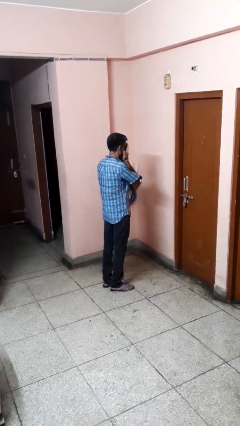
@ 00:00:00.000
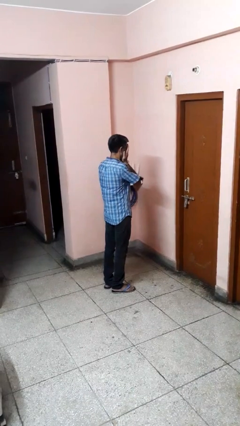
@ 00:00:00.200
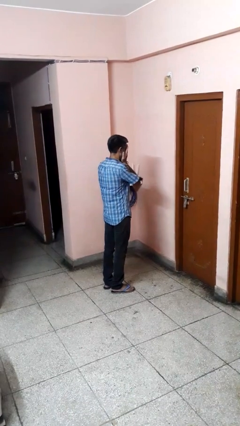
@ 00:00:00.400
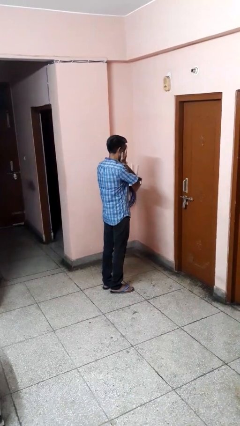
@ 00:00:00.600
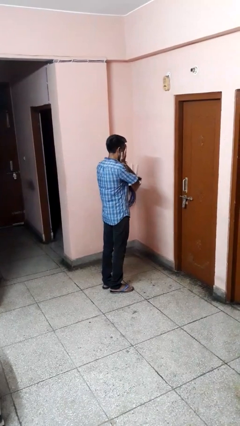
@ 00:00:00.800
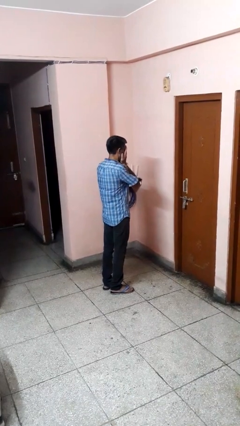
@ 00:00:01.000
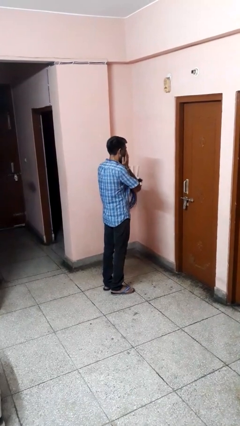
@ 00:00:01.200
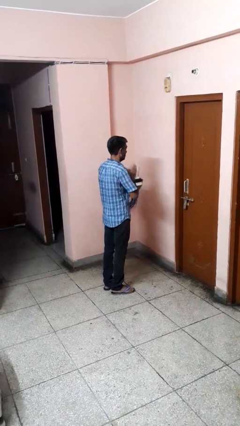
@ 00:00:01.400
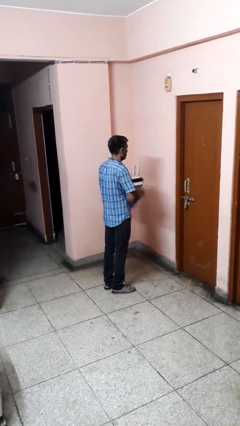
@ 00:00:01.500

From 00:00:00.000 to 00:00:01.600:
person covers face with hands

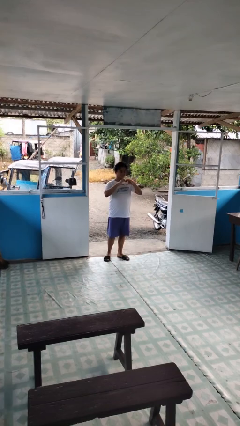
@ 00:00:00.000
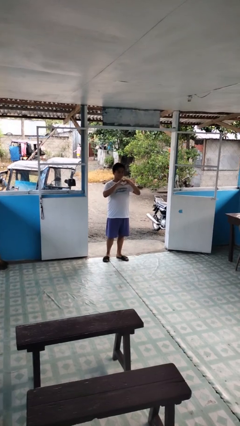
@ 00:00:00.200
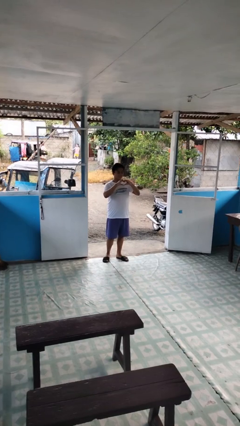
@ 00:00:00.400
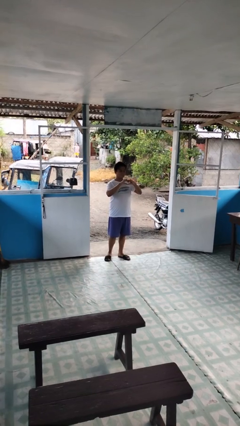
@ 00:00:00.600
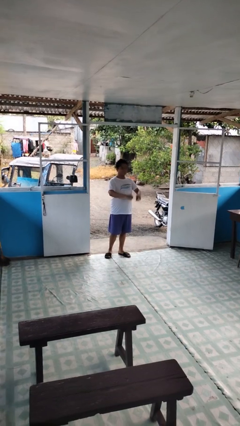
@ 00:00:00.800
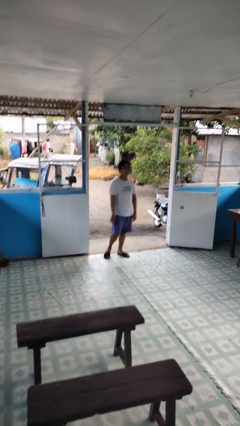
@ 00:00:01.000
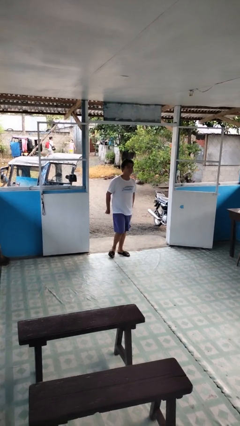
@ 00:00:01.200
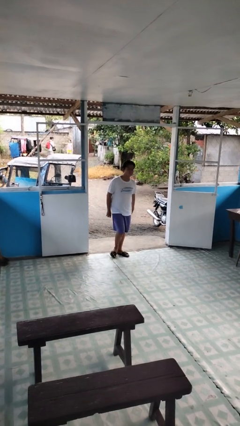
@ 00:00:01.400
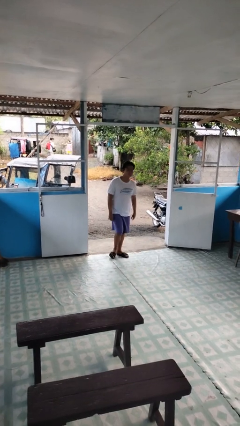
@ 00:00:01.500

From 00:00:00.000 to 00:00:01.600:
person gestures heart

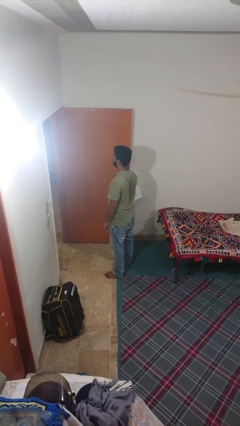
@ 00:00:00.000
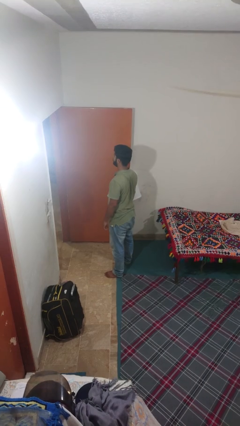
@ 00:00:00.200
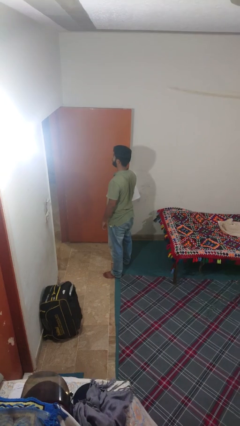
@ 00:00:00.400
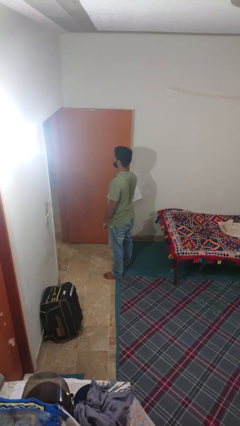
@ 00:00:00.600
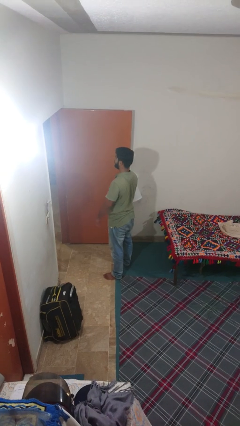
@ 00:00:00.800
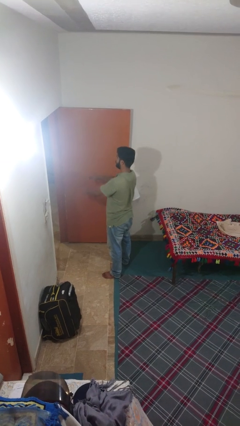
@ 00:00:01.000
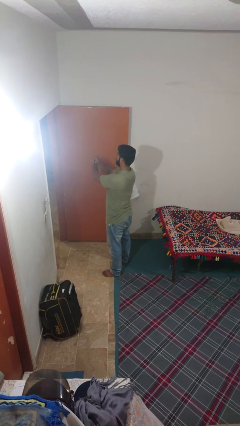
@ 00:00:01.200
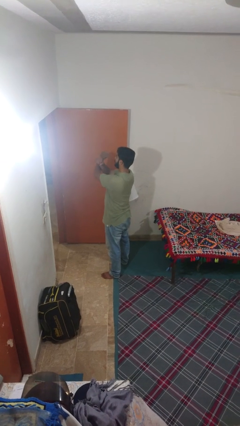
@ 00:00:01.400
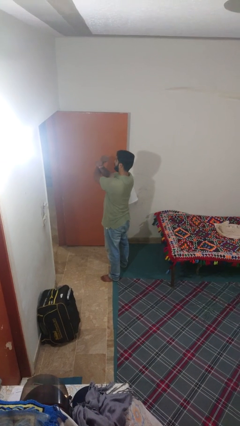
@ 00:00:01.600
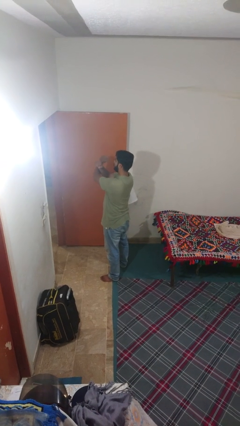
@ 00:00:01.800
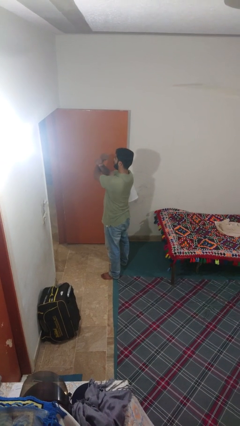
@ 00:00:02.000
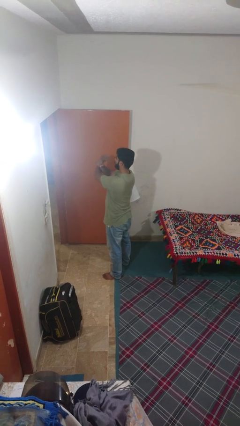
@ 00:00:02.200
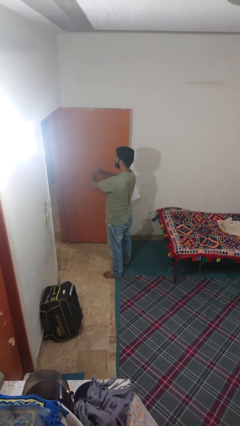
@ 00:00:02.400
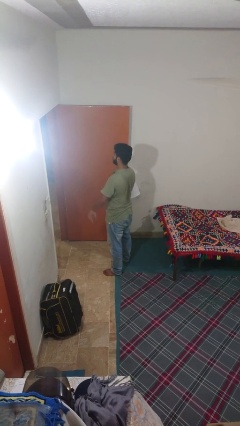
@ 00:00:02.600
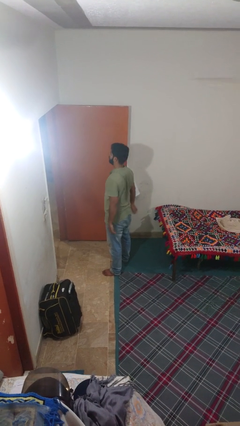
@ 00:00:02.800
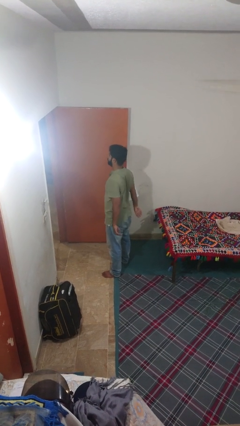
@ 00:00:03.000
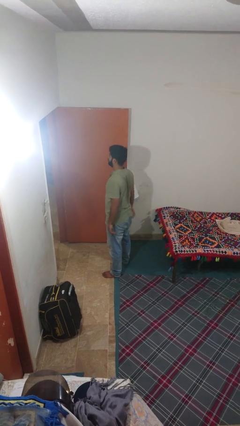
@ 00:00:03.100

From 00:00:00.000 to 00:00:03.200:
person crosses arms

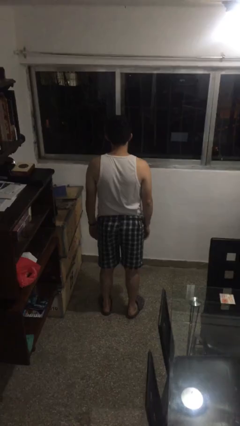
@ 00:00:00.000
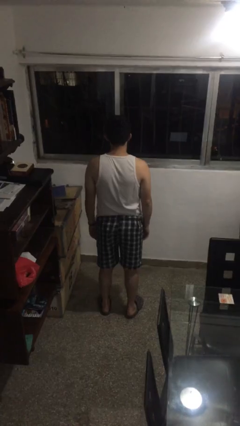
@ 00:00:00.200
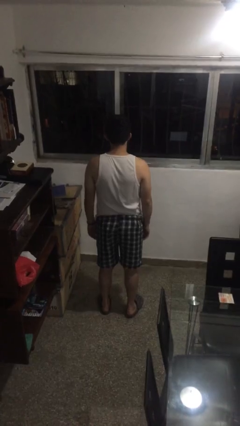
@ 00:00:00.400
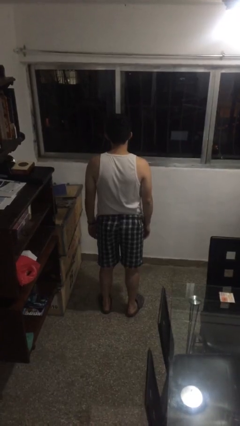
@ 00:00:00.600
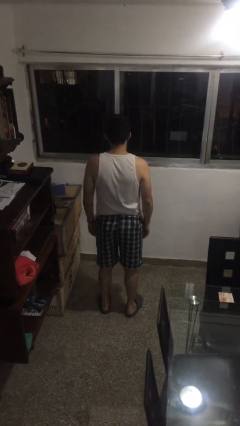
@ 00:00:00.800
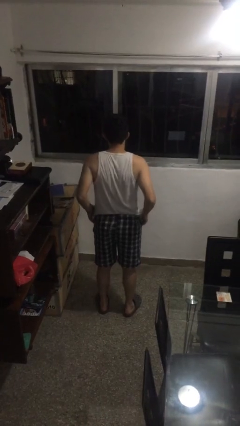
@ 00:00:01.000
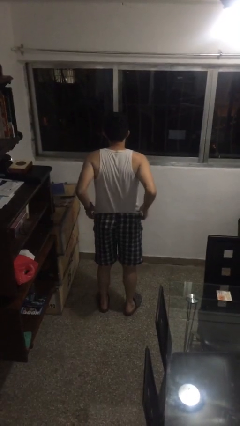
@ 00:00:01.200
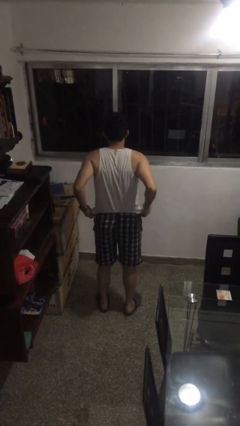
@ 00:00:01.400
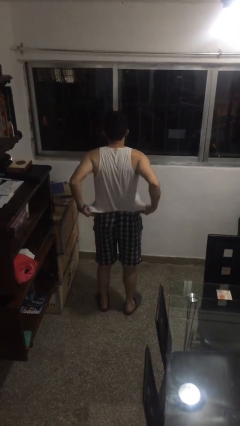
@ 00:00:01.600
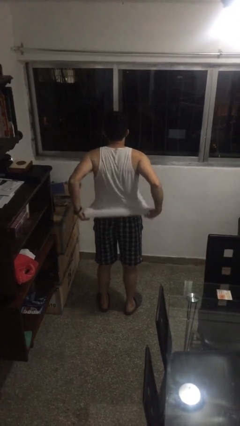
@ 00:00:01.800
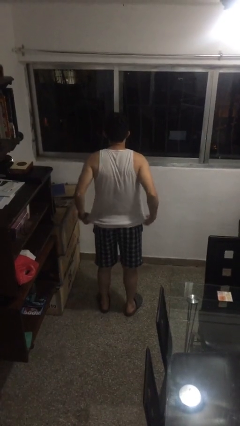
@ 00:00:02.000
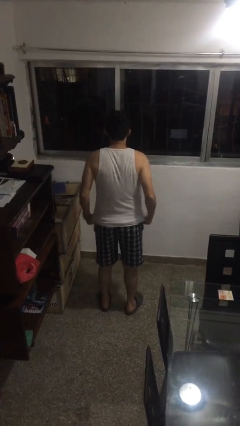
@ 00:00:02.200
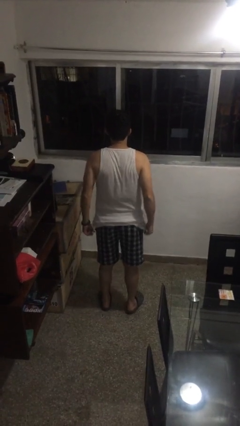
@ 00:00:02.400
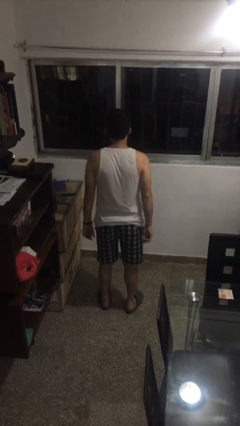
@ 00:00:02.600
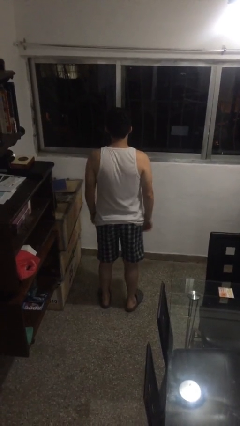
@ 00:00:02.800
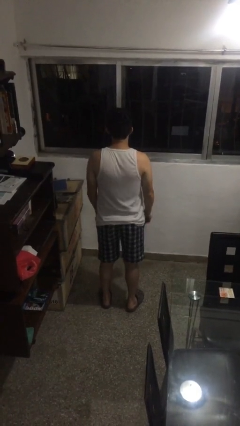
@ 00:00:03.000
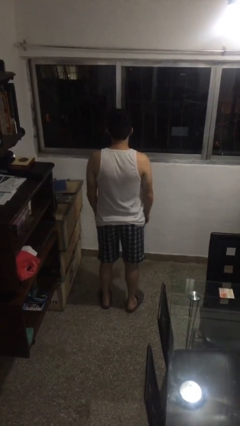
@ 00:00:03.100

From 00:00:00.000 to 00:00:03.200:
person untucks shirt

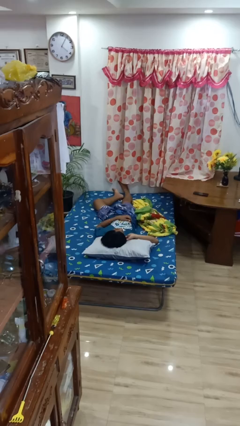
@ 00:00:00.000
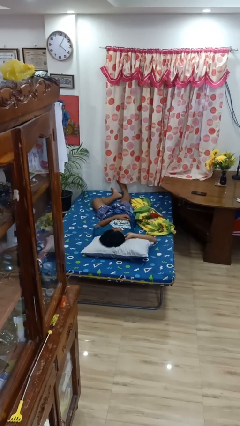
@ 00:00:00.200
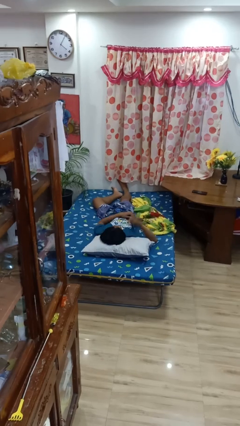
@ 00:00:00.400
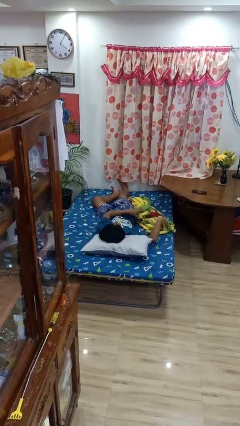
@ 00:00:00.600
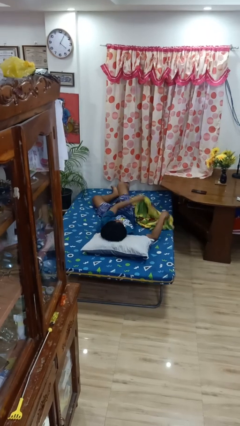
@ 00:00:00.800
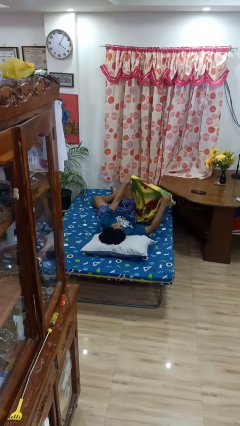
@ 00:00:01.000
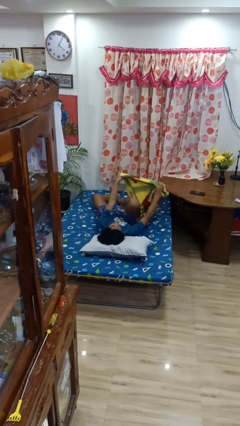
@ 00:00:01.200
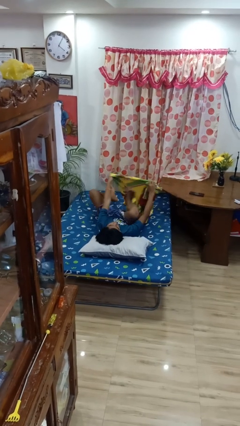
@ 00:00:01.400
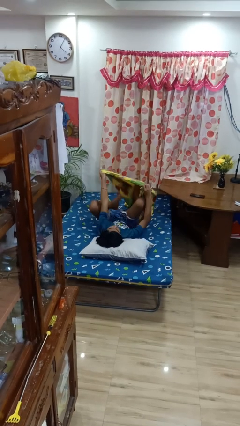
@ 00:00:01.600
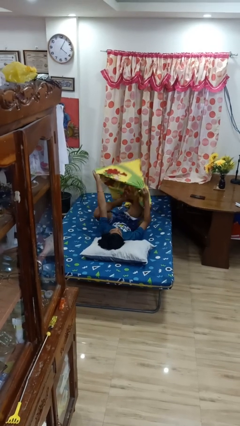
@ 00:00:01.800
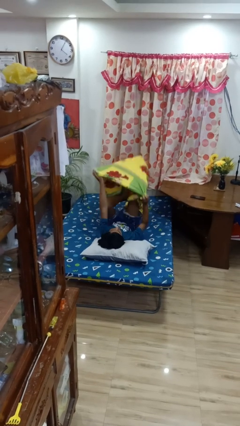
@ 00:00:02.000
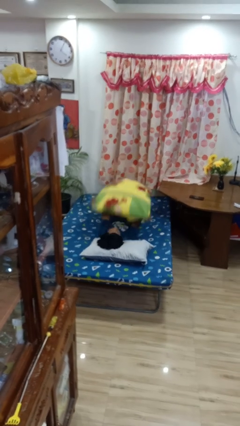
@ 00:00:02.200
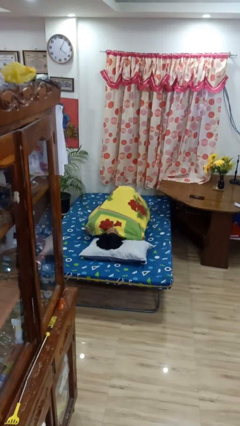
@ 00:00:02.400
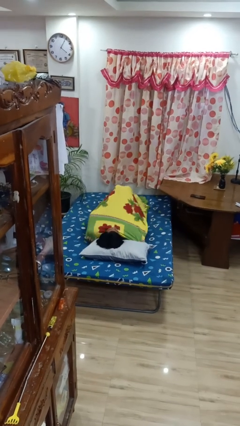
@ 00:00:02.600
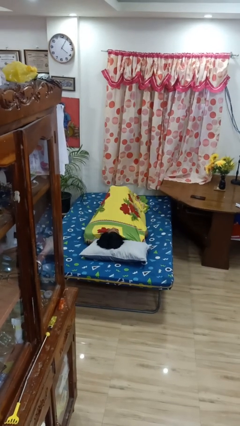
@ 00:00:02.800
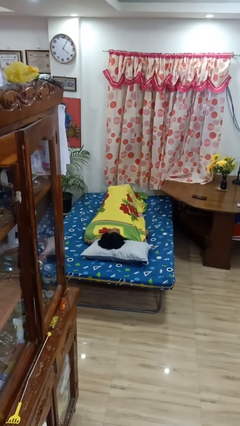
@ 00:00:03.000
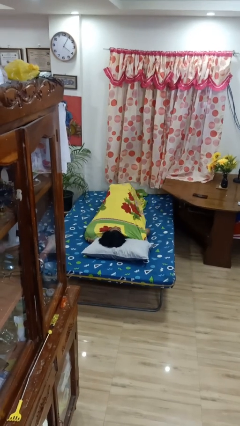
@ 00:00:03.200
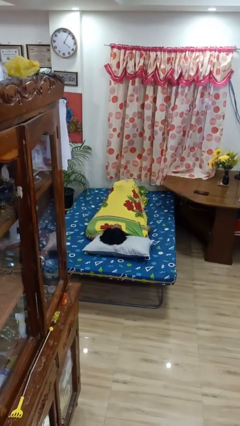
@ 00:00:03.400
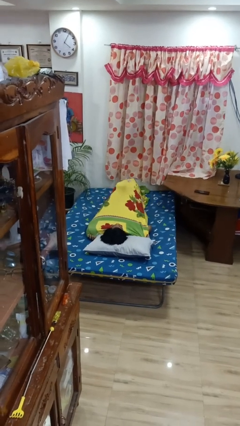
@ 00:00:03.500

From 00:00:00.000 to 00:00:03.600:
person covers with bedsheets

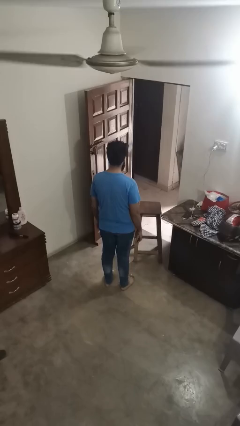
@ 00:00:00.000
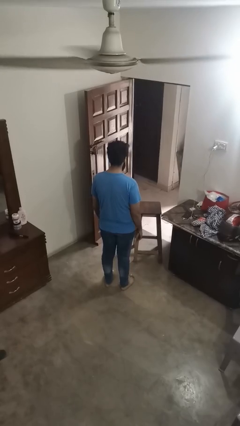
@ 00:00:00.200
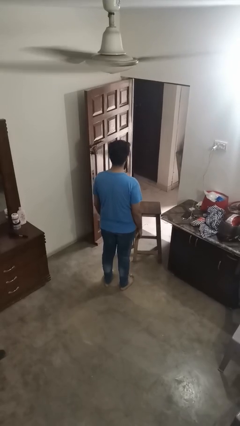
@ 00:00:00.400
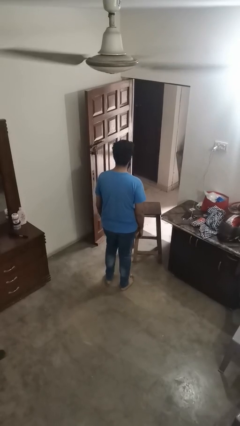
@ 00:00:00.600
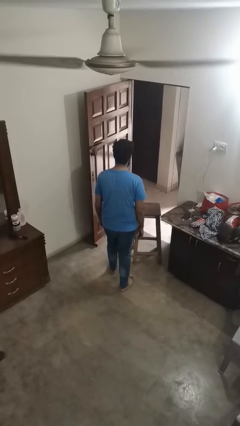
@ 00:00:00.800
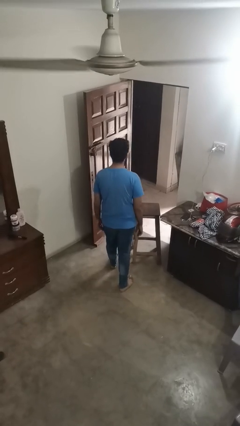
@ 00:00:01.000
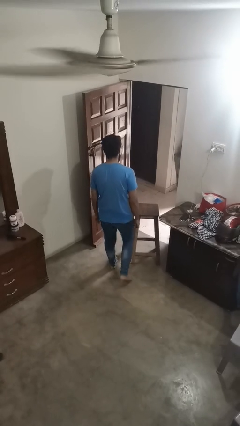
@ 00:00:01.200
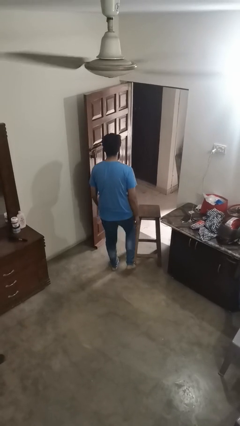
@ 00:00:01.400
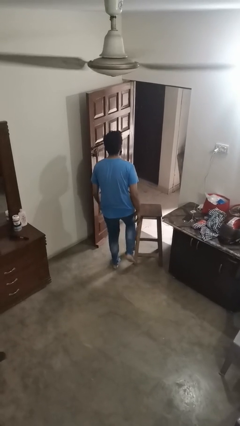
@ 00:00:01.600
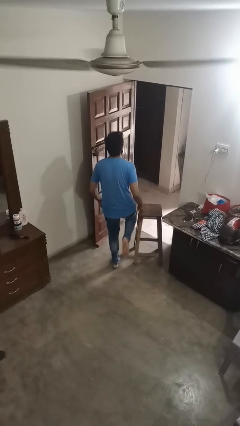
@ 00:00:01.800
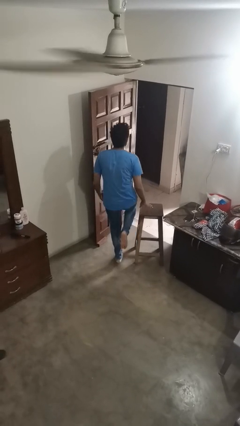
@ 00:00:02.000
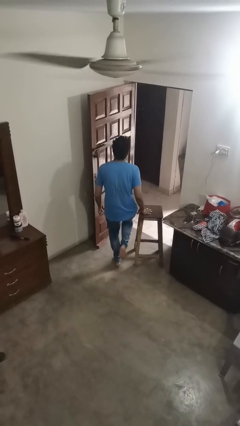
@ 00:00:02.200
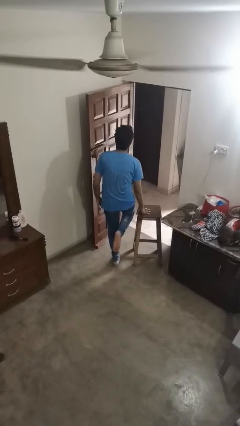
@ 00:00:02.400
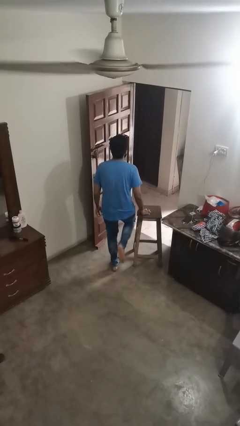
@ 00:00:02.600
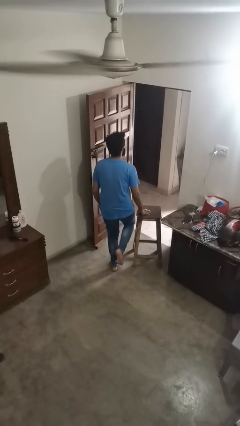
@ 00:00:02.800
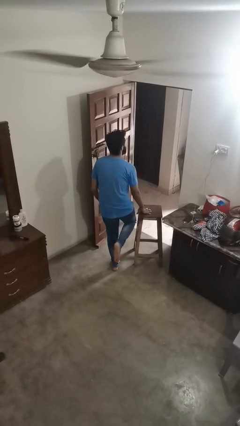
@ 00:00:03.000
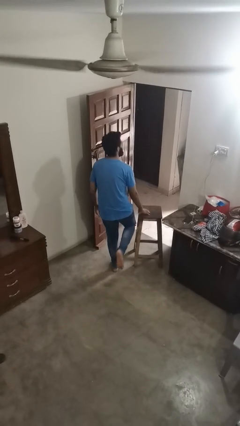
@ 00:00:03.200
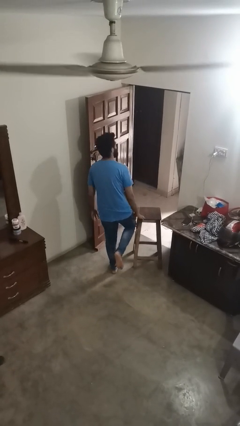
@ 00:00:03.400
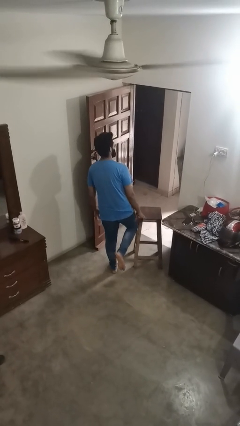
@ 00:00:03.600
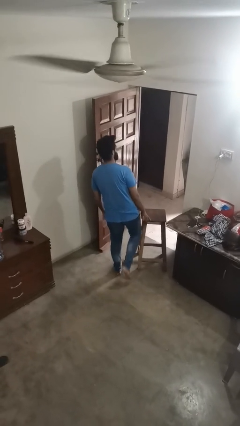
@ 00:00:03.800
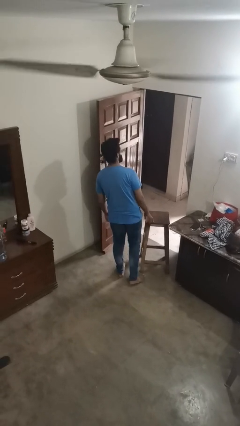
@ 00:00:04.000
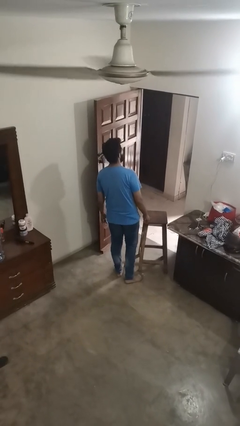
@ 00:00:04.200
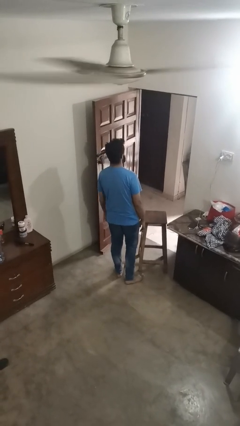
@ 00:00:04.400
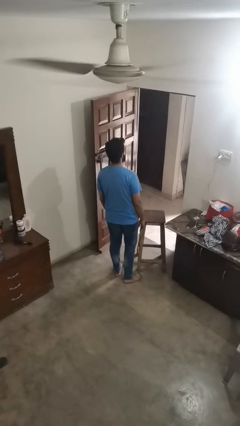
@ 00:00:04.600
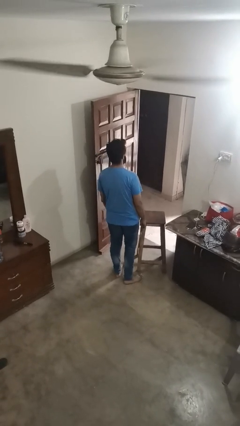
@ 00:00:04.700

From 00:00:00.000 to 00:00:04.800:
person stubs toe
